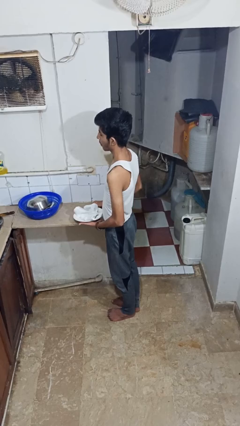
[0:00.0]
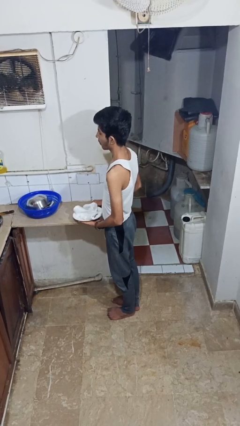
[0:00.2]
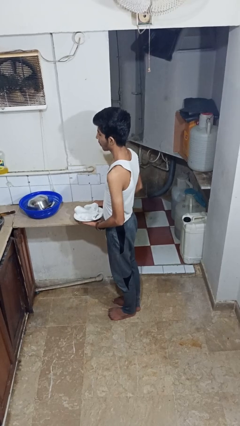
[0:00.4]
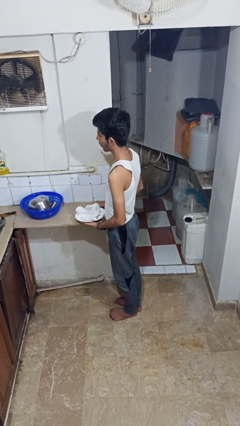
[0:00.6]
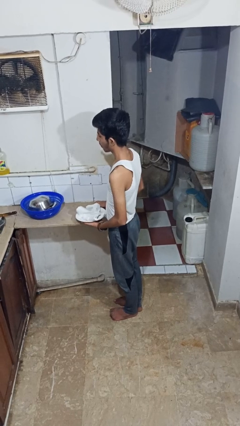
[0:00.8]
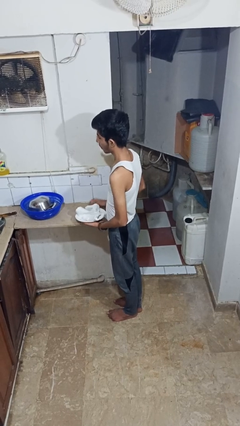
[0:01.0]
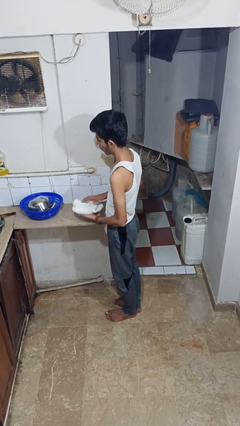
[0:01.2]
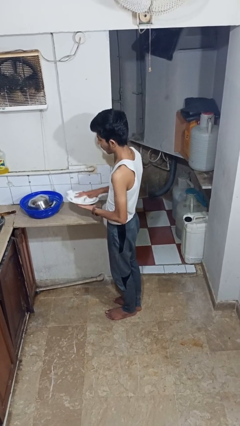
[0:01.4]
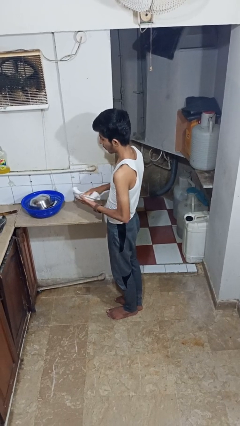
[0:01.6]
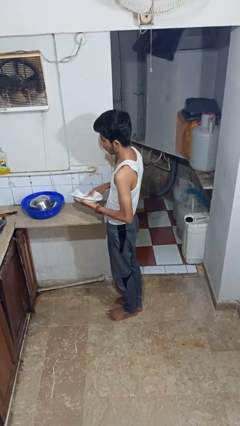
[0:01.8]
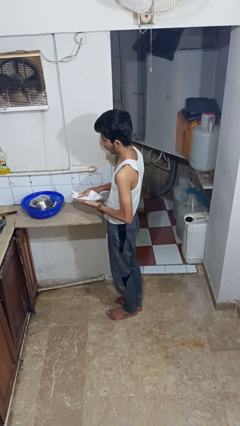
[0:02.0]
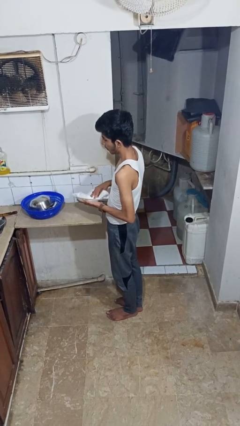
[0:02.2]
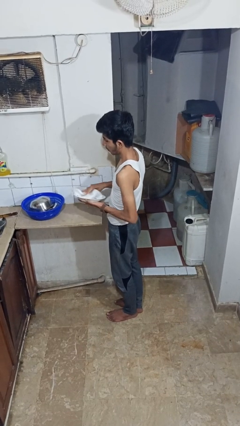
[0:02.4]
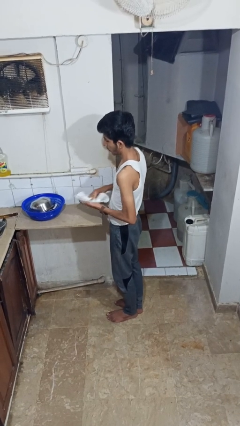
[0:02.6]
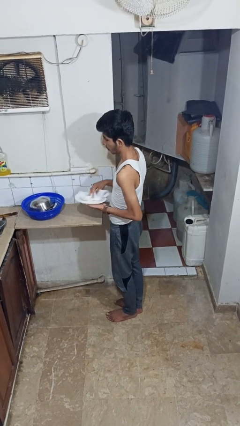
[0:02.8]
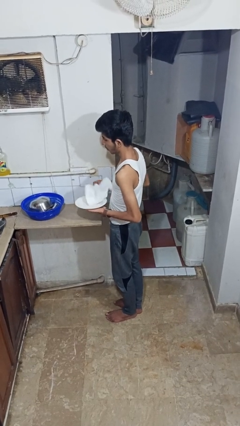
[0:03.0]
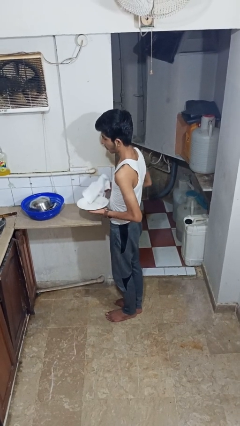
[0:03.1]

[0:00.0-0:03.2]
person dries dish

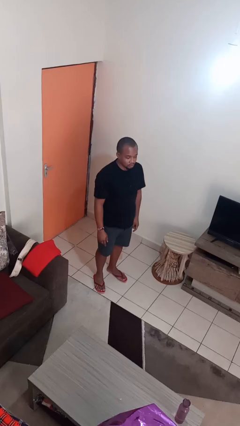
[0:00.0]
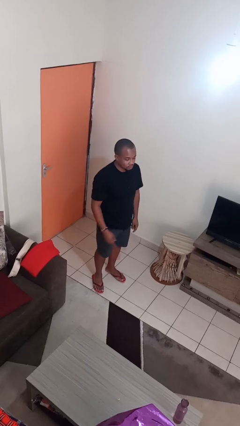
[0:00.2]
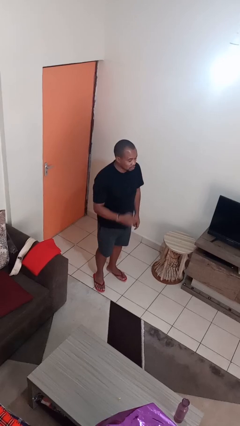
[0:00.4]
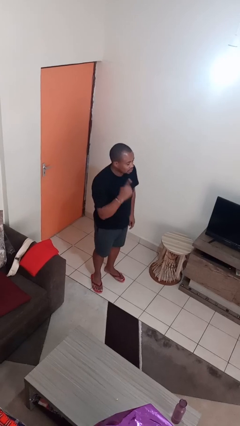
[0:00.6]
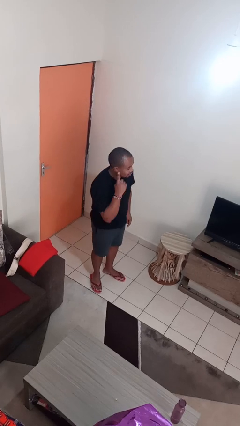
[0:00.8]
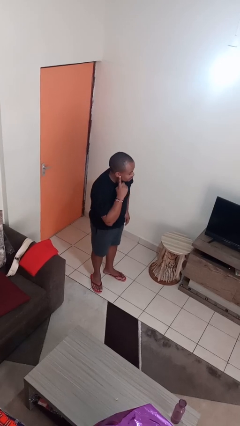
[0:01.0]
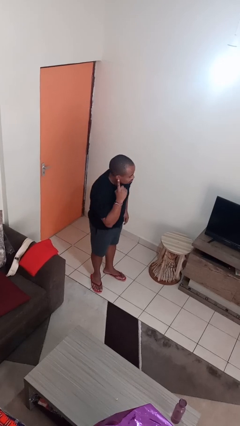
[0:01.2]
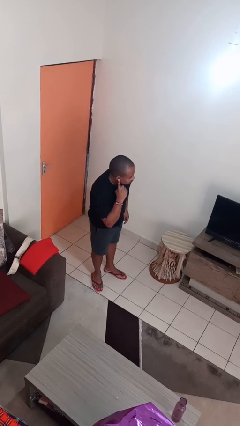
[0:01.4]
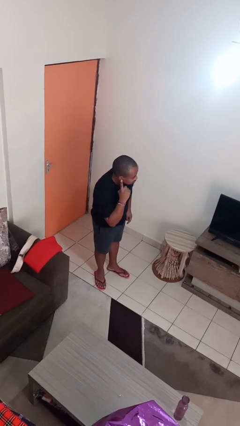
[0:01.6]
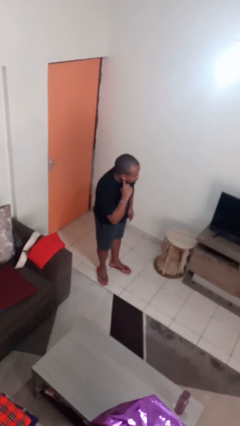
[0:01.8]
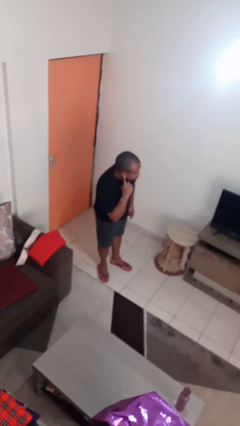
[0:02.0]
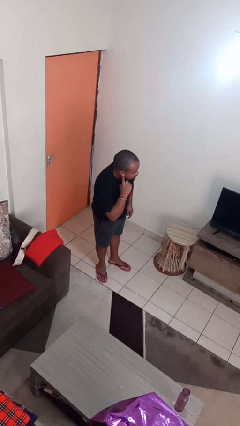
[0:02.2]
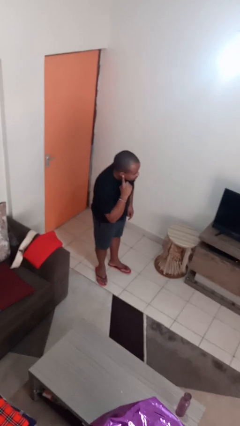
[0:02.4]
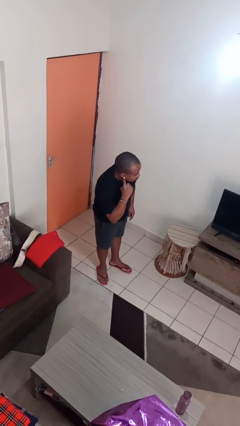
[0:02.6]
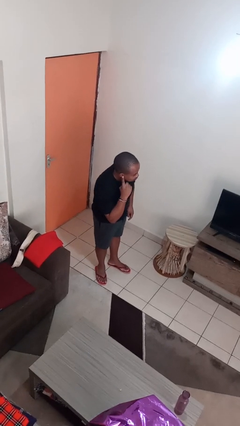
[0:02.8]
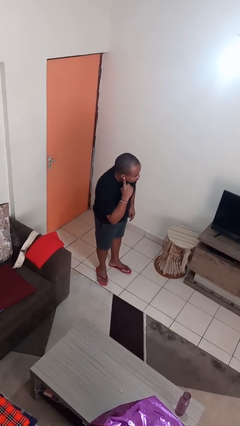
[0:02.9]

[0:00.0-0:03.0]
person gestures listen closely

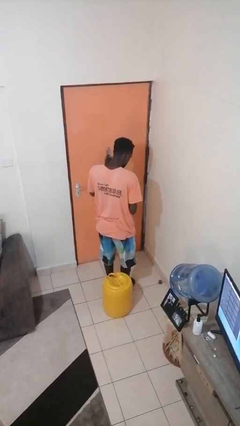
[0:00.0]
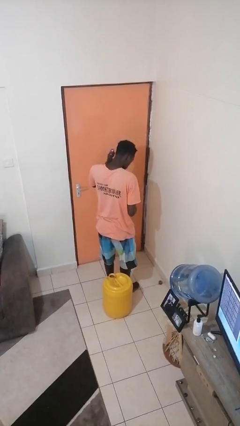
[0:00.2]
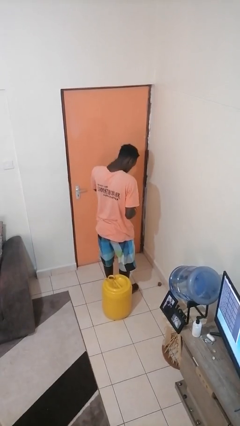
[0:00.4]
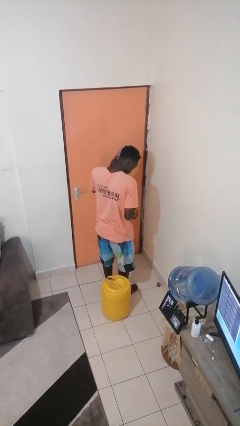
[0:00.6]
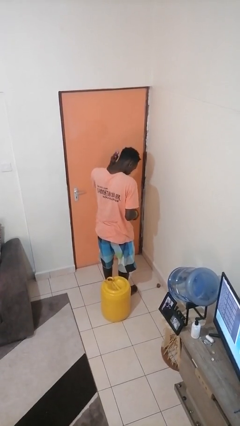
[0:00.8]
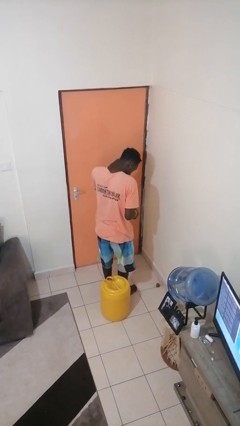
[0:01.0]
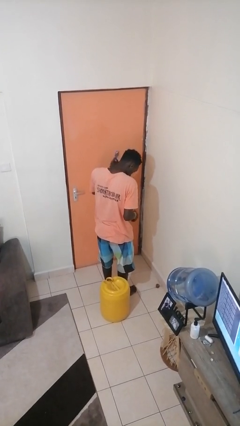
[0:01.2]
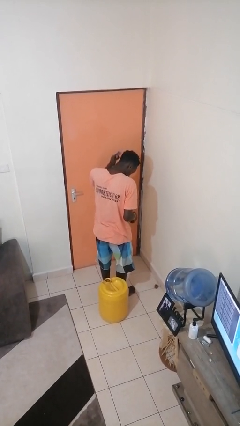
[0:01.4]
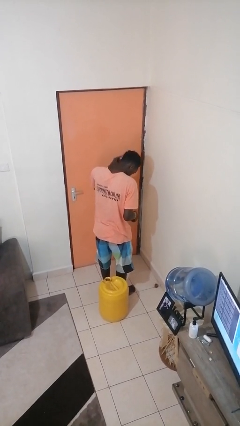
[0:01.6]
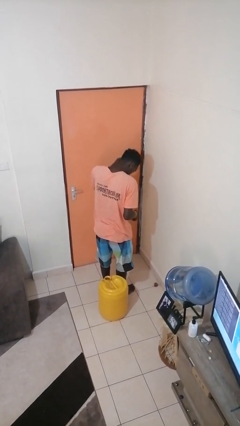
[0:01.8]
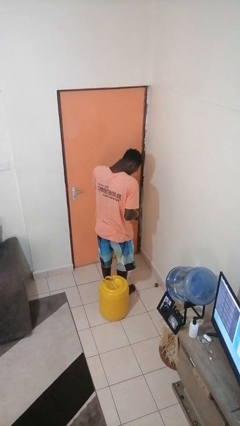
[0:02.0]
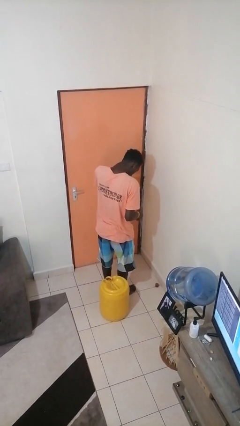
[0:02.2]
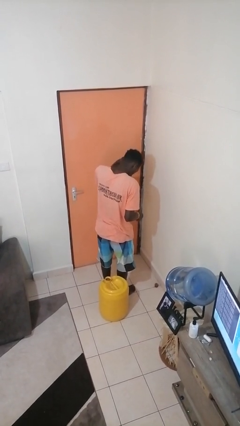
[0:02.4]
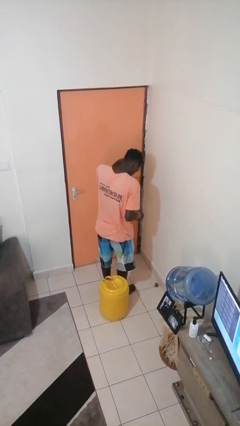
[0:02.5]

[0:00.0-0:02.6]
person brushes hair

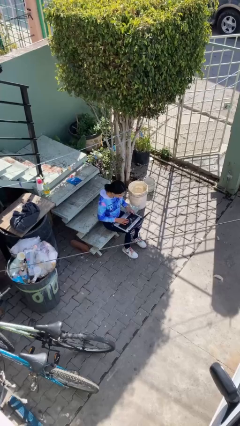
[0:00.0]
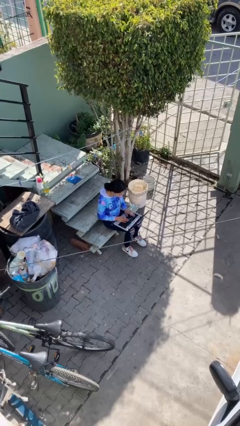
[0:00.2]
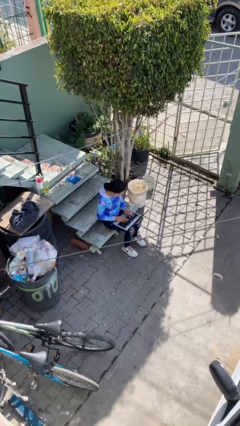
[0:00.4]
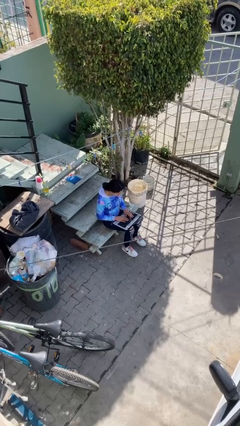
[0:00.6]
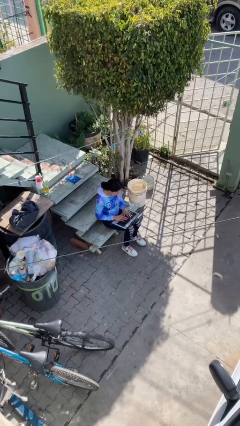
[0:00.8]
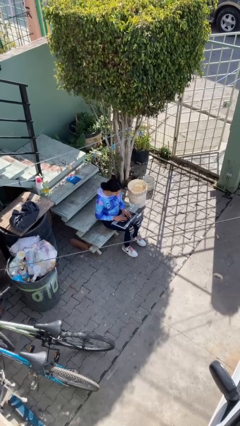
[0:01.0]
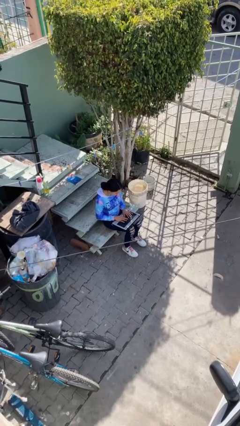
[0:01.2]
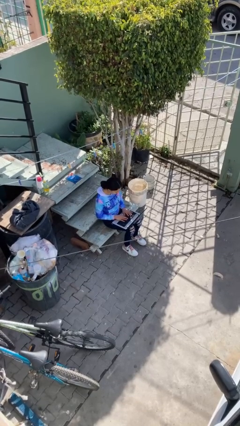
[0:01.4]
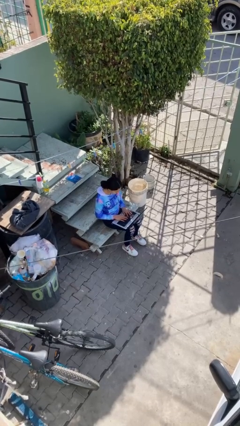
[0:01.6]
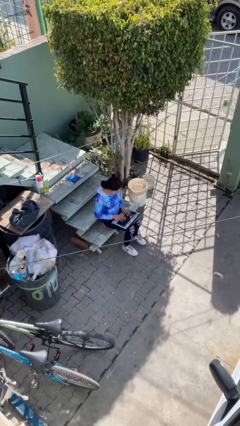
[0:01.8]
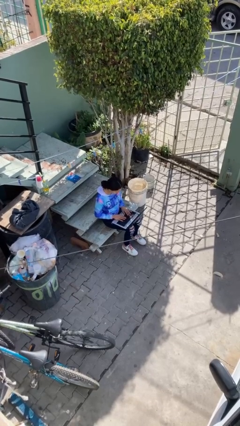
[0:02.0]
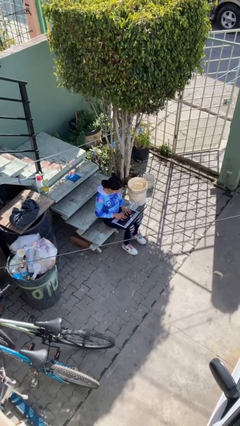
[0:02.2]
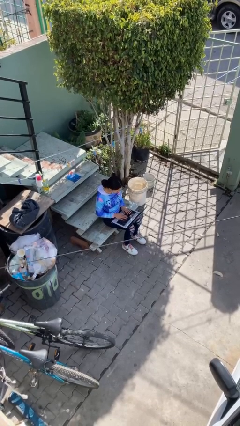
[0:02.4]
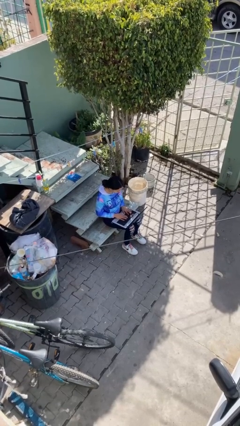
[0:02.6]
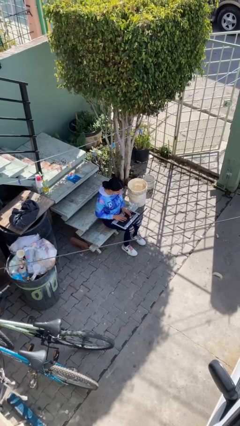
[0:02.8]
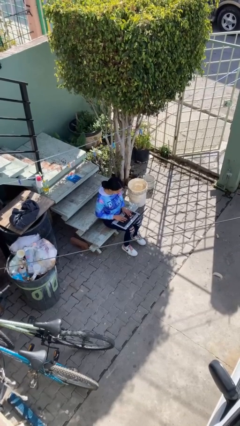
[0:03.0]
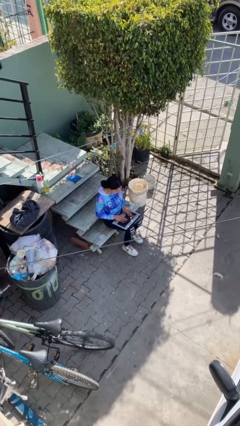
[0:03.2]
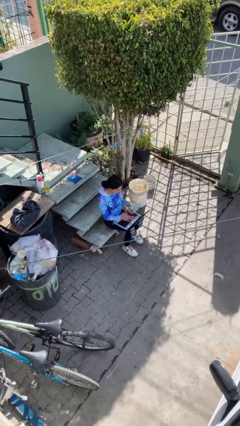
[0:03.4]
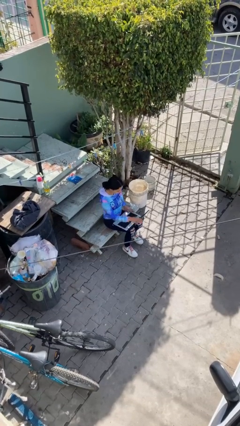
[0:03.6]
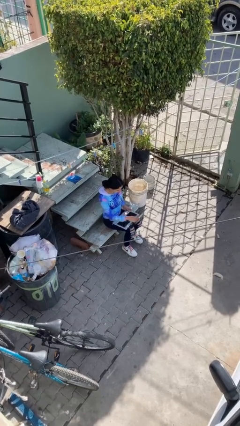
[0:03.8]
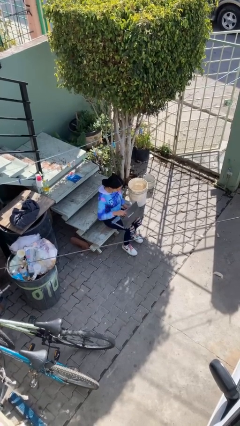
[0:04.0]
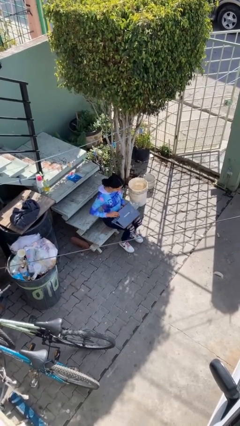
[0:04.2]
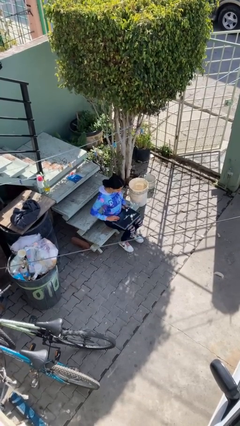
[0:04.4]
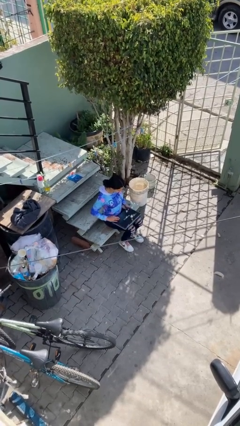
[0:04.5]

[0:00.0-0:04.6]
person interacts with laptop

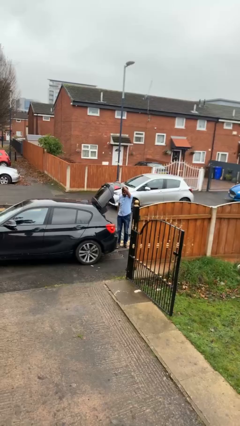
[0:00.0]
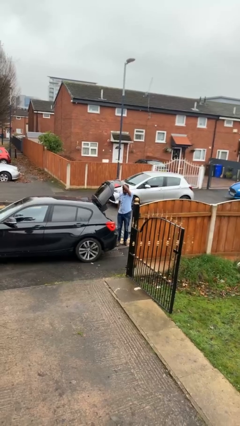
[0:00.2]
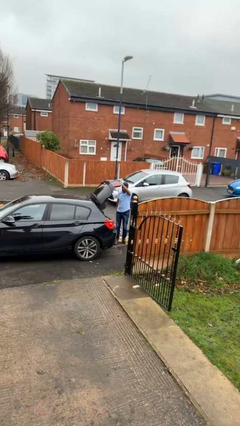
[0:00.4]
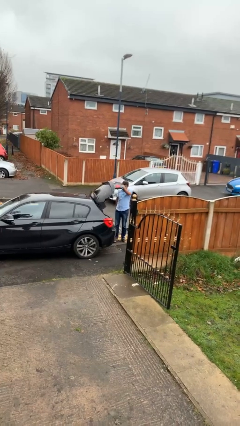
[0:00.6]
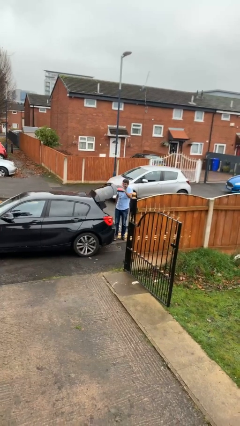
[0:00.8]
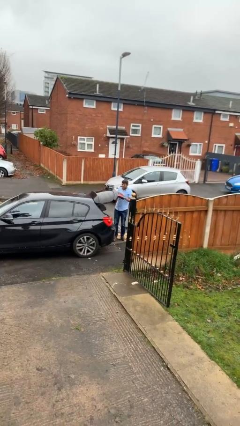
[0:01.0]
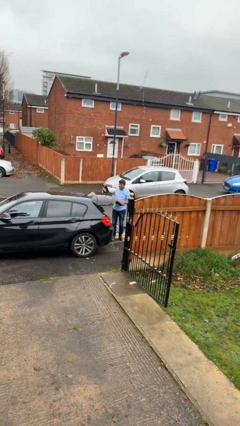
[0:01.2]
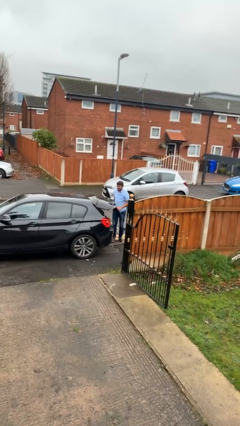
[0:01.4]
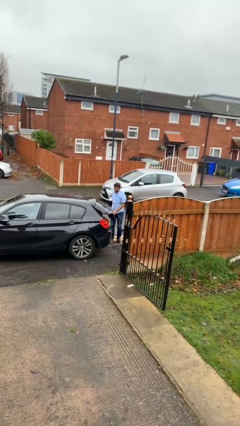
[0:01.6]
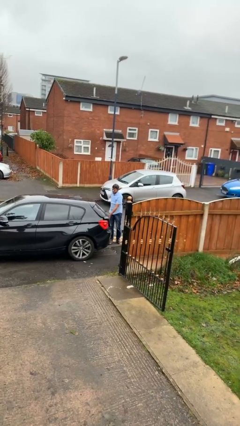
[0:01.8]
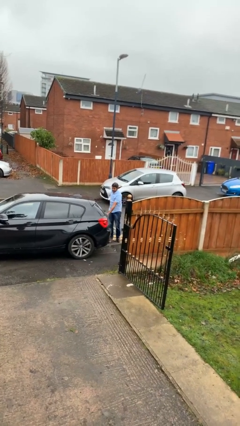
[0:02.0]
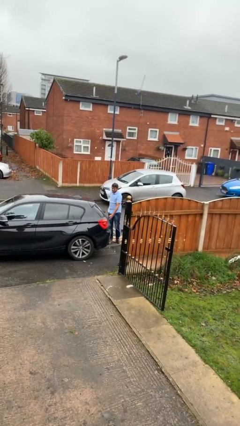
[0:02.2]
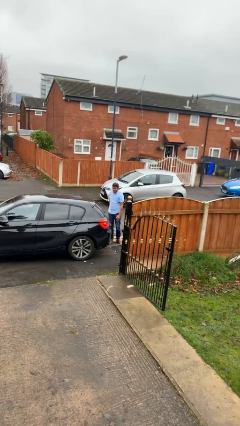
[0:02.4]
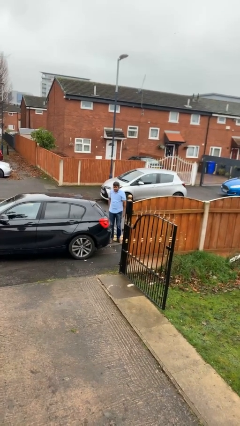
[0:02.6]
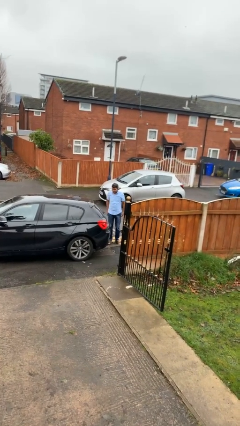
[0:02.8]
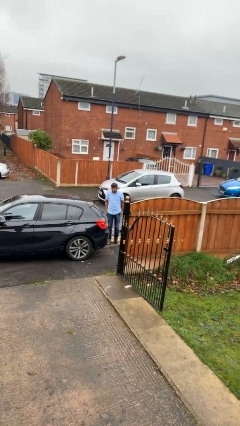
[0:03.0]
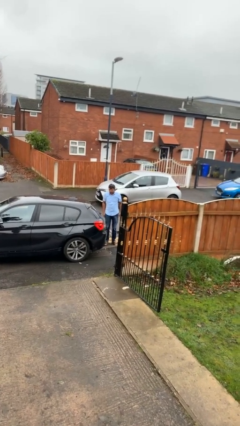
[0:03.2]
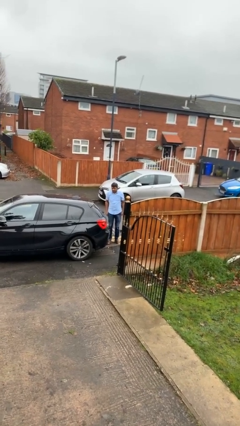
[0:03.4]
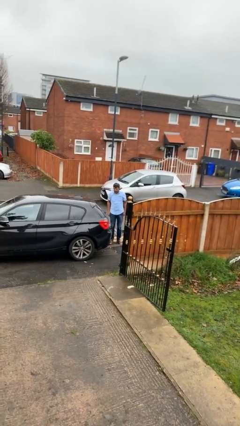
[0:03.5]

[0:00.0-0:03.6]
person closes car trunk

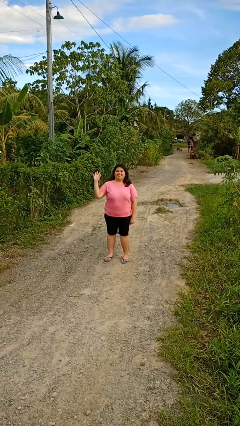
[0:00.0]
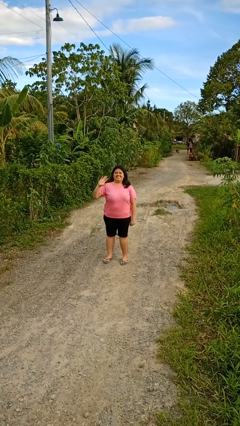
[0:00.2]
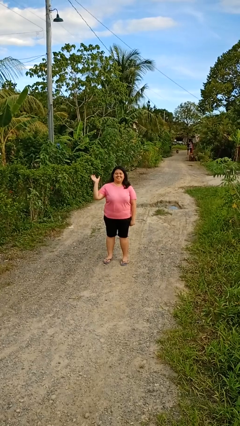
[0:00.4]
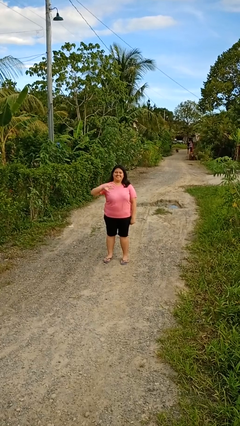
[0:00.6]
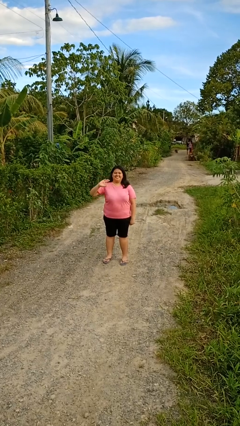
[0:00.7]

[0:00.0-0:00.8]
person waves at person
